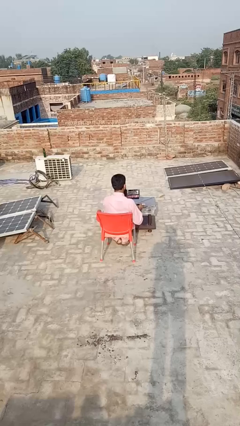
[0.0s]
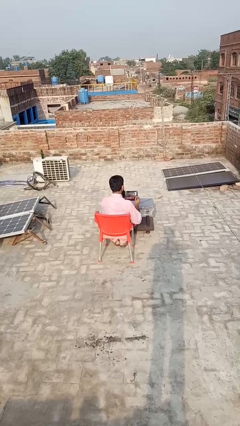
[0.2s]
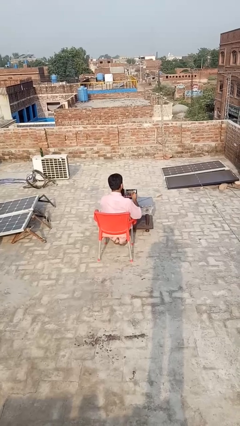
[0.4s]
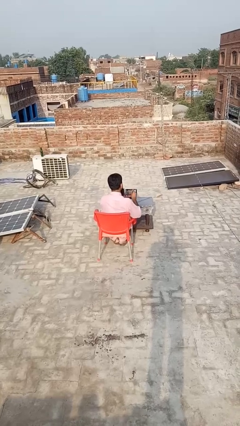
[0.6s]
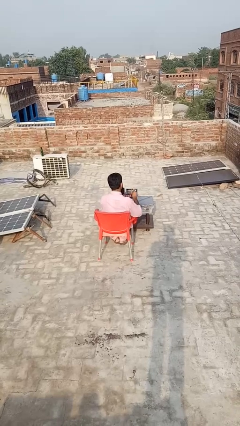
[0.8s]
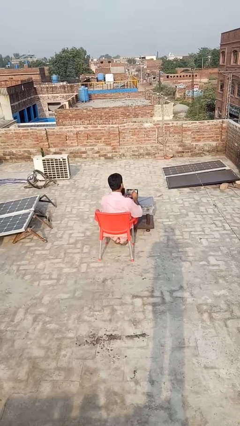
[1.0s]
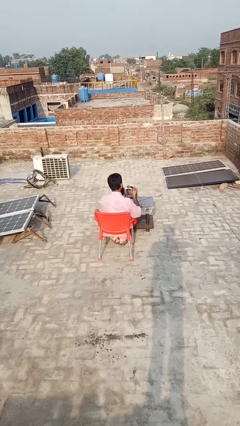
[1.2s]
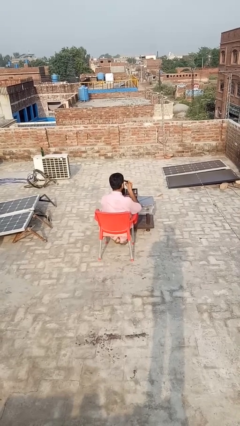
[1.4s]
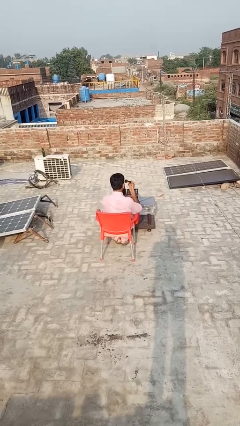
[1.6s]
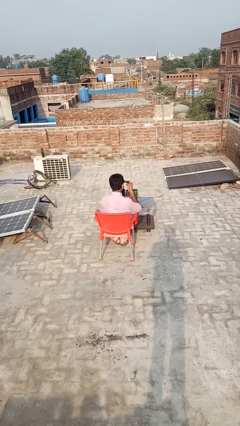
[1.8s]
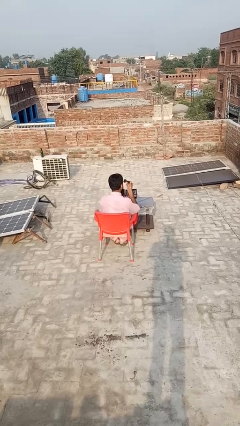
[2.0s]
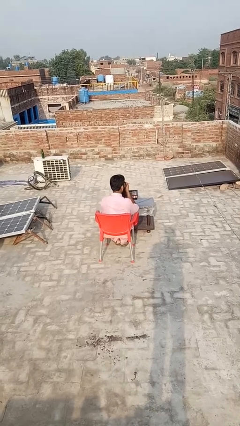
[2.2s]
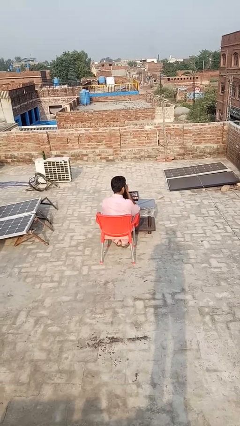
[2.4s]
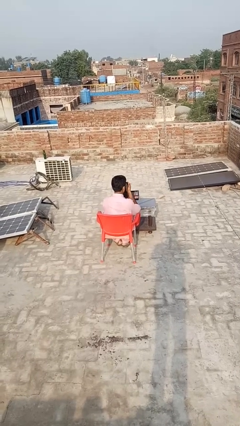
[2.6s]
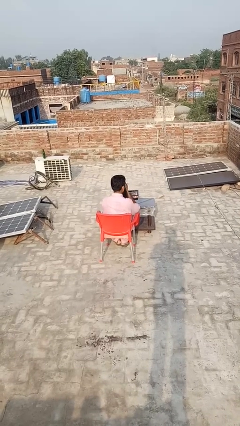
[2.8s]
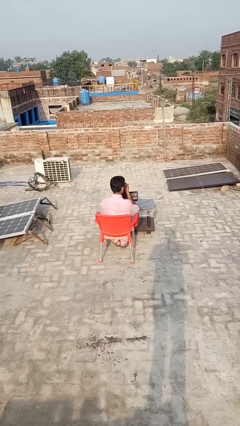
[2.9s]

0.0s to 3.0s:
person applies eye makeup

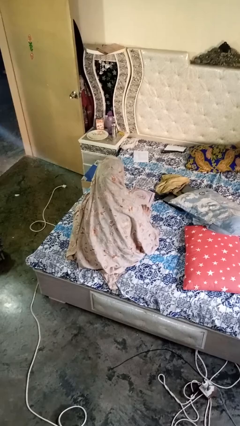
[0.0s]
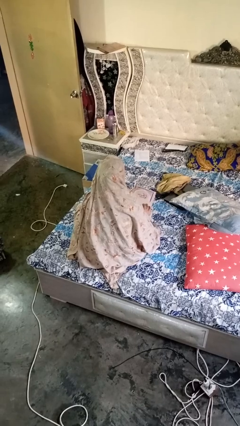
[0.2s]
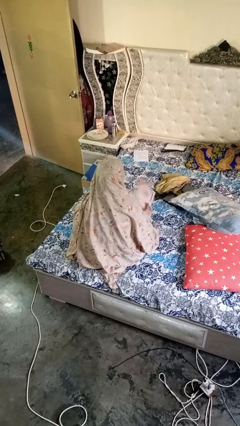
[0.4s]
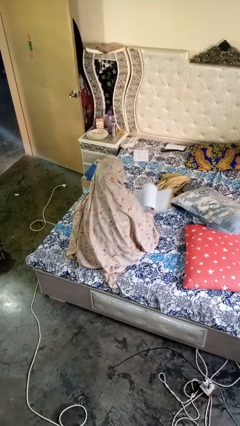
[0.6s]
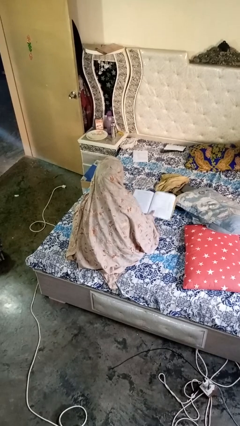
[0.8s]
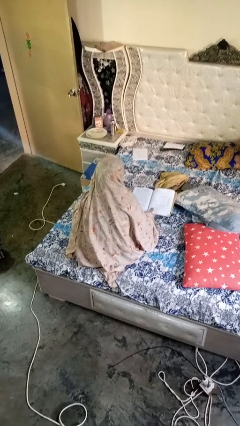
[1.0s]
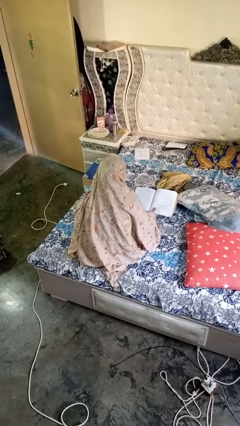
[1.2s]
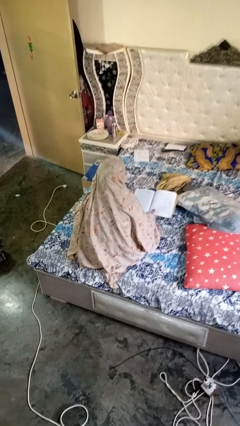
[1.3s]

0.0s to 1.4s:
person reads book

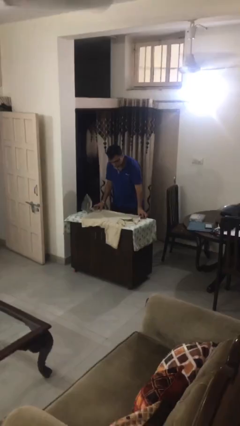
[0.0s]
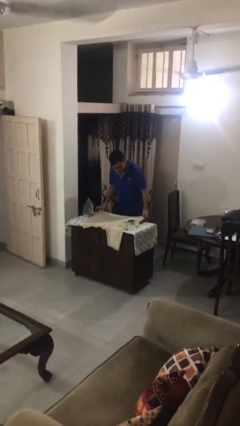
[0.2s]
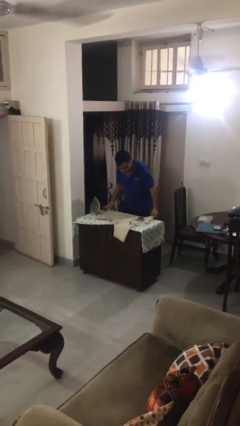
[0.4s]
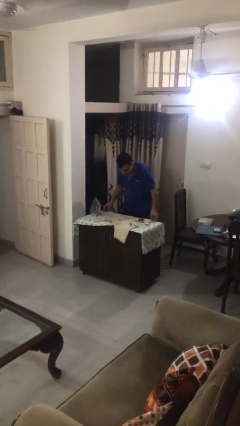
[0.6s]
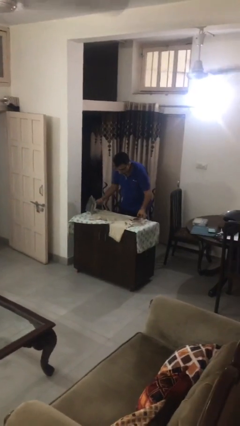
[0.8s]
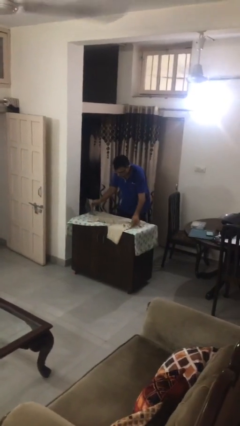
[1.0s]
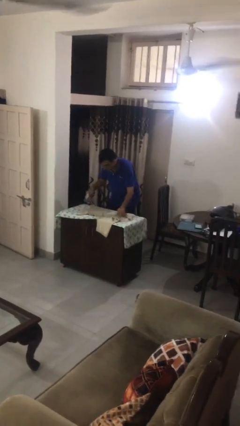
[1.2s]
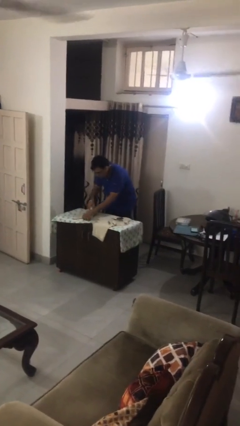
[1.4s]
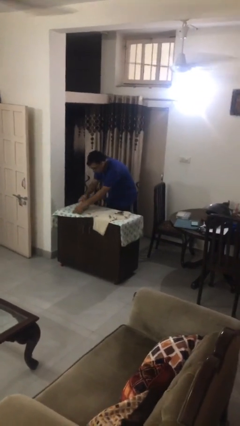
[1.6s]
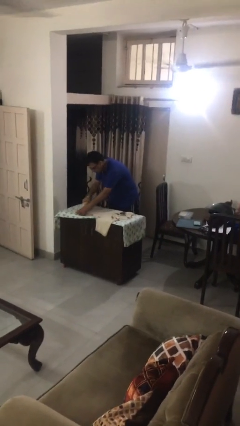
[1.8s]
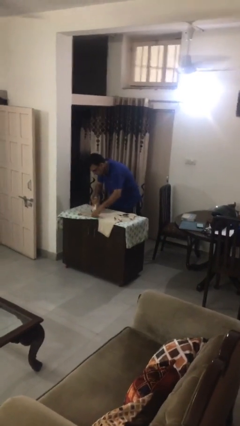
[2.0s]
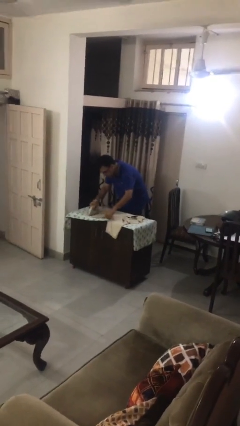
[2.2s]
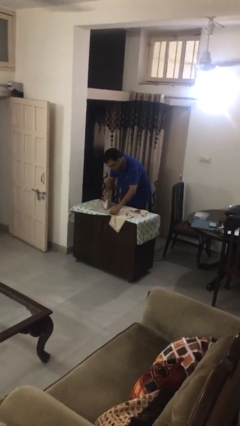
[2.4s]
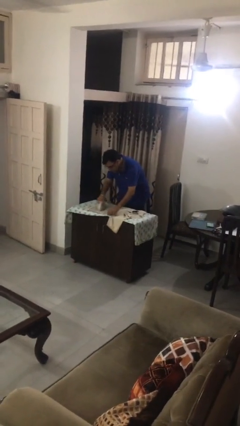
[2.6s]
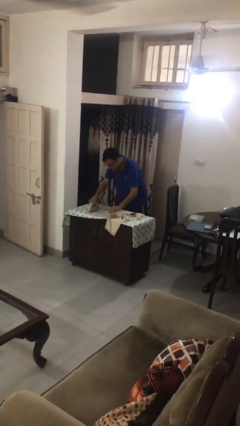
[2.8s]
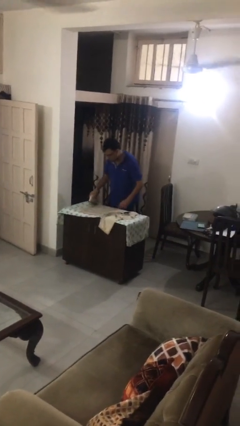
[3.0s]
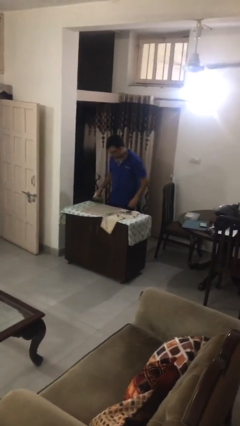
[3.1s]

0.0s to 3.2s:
person irons clothes

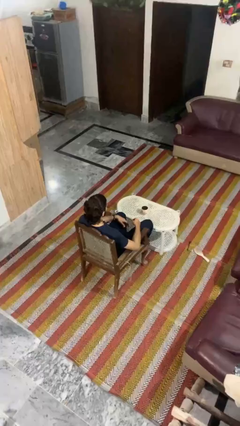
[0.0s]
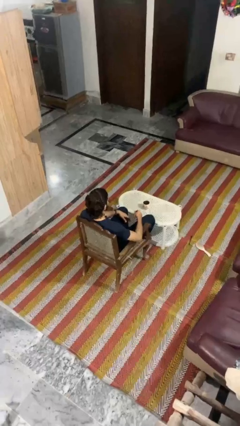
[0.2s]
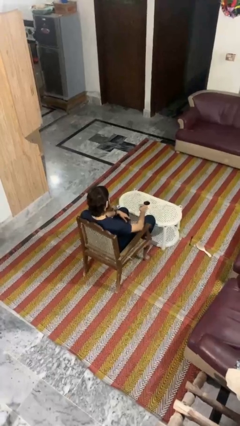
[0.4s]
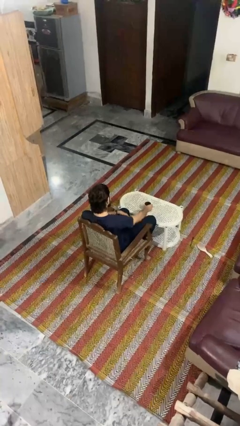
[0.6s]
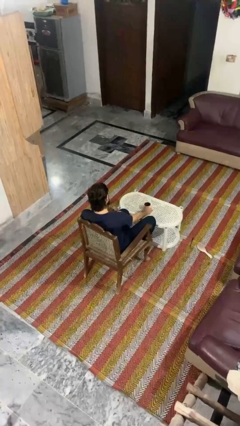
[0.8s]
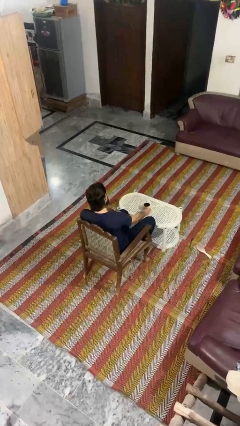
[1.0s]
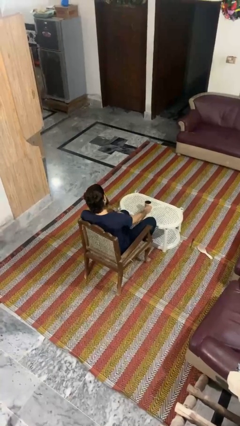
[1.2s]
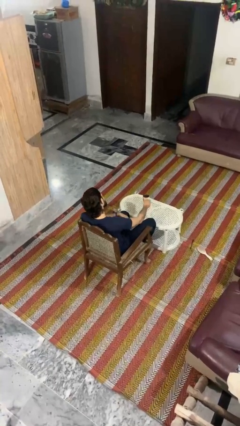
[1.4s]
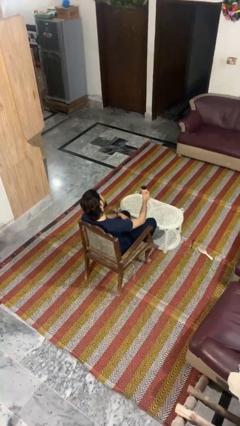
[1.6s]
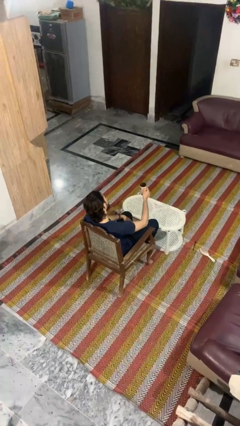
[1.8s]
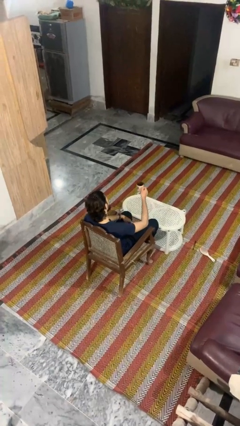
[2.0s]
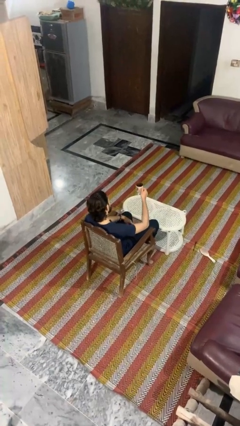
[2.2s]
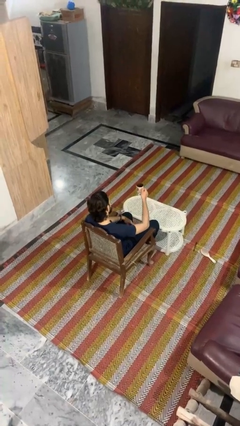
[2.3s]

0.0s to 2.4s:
person picks up object from table

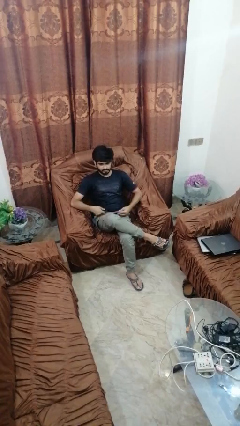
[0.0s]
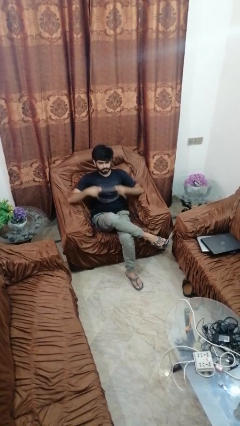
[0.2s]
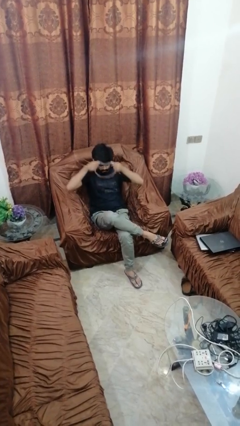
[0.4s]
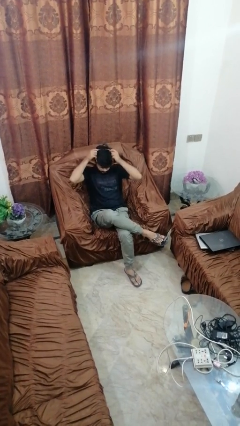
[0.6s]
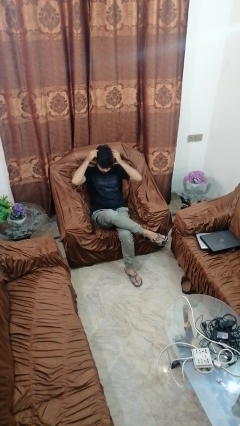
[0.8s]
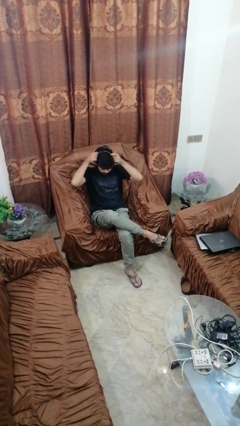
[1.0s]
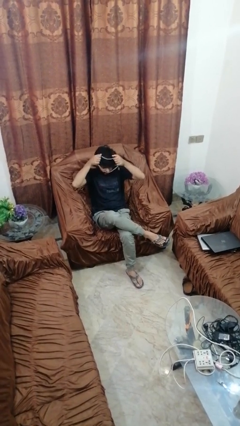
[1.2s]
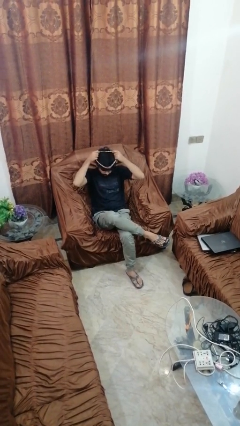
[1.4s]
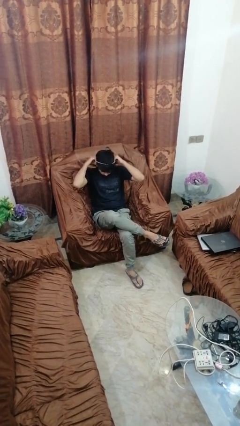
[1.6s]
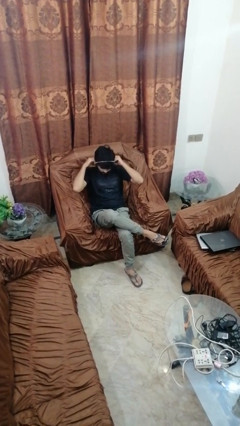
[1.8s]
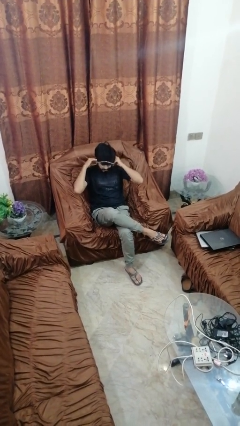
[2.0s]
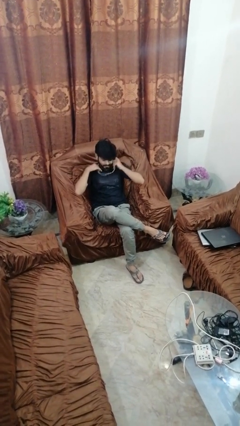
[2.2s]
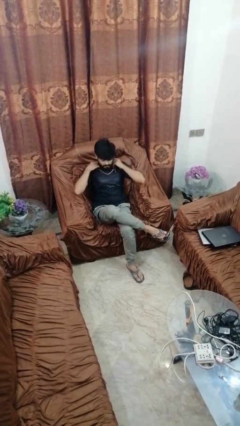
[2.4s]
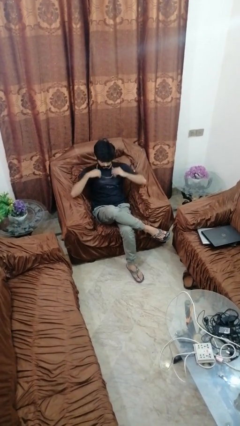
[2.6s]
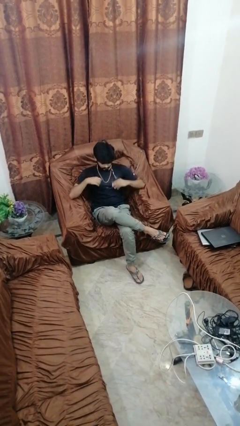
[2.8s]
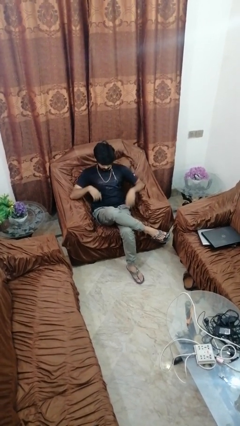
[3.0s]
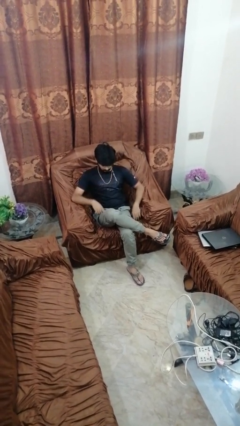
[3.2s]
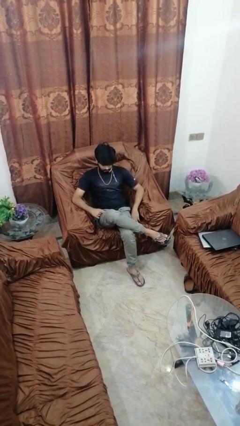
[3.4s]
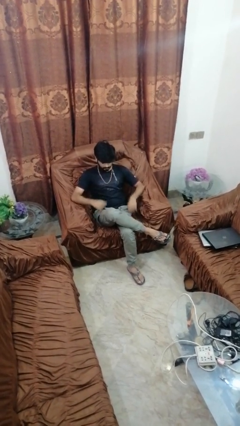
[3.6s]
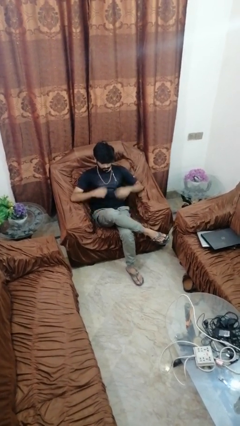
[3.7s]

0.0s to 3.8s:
person puts on necklace

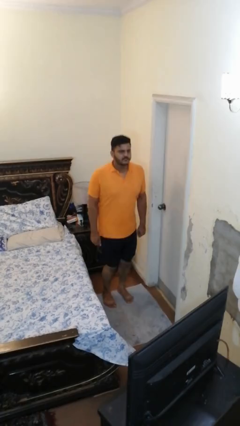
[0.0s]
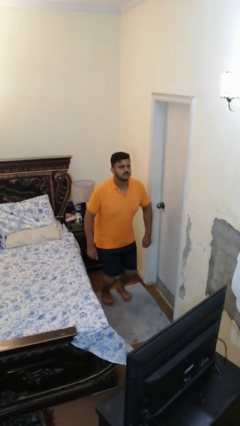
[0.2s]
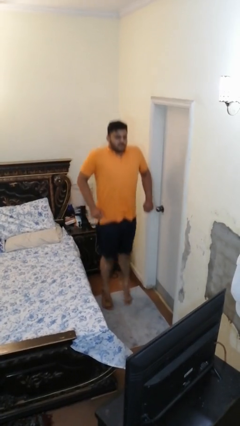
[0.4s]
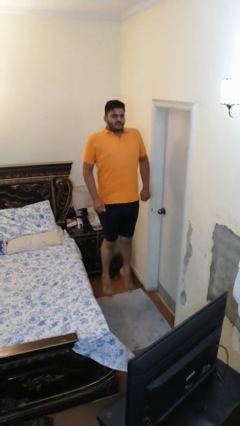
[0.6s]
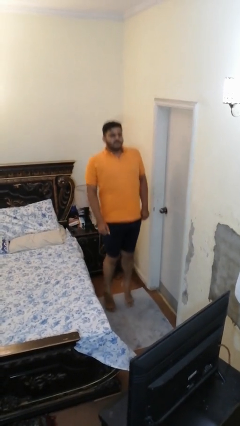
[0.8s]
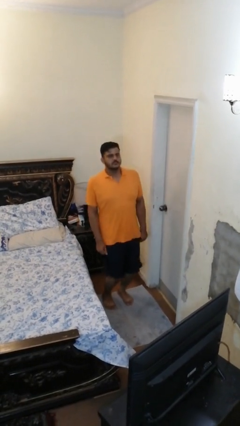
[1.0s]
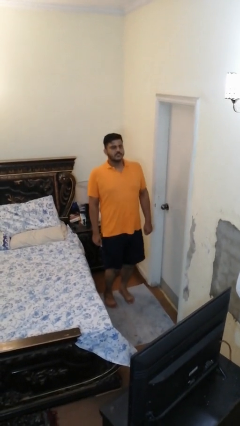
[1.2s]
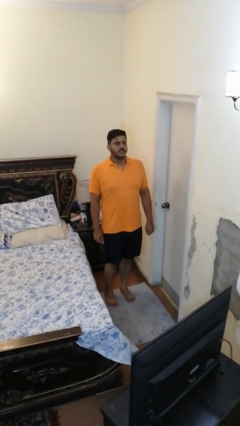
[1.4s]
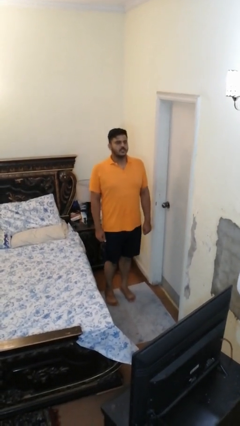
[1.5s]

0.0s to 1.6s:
person jumps

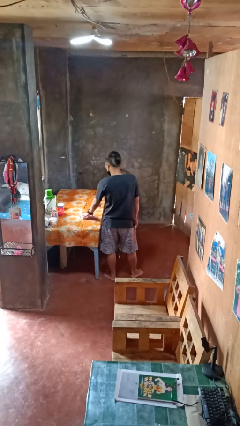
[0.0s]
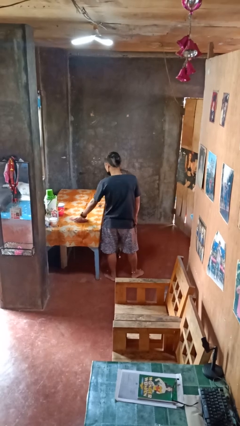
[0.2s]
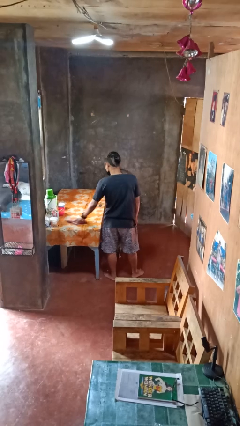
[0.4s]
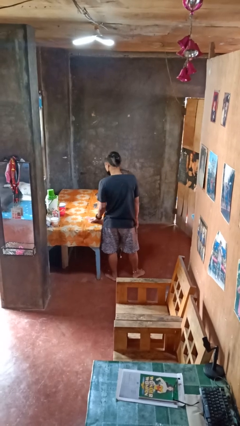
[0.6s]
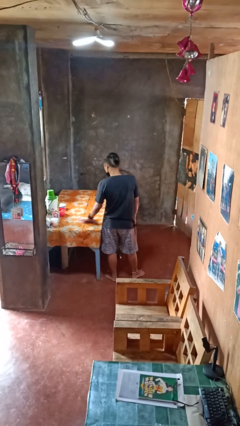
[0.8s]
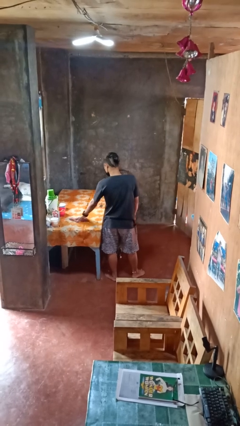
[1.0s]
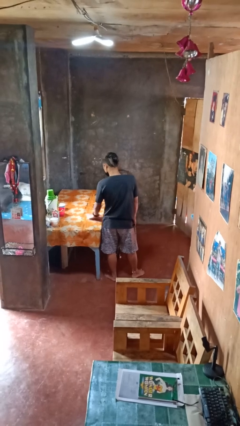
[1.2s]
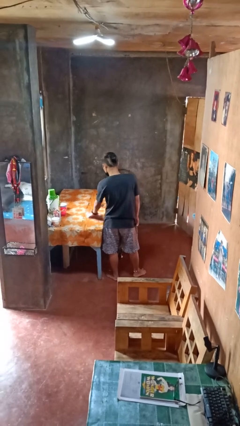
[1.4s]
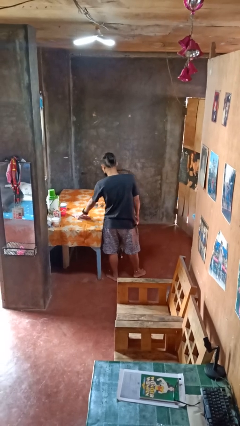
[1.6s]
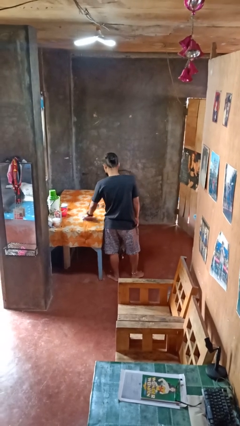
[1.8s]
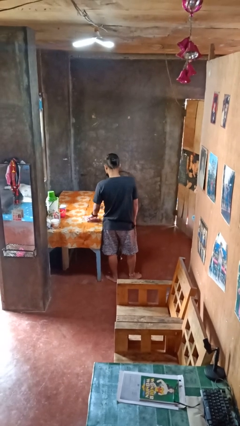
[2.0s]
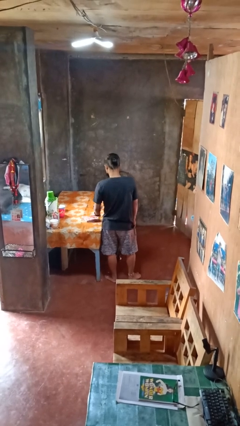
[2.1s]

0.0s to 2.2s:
person cleans table with rag
